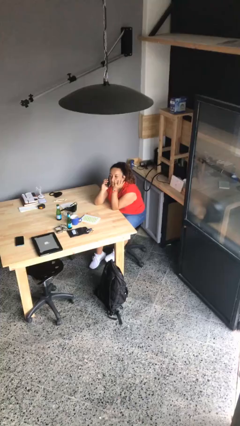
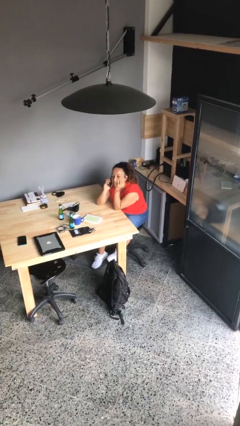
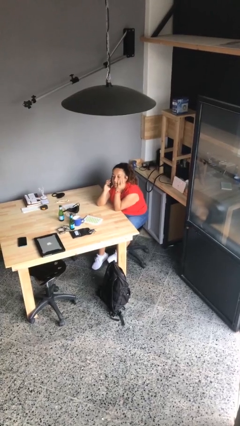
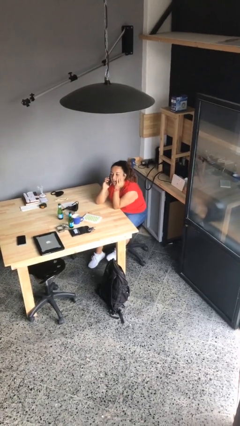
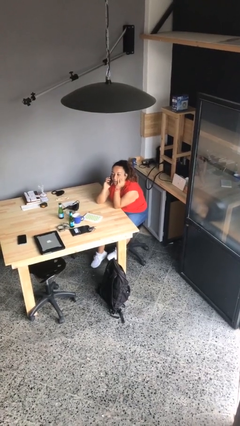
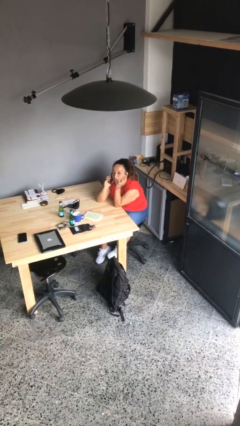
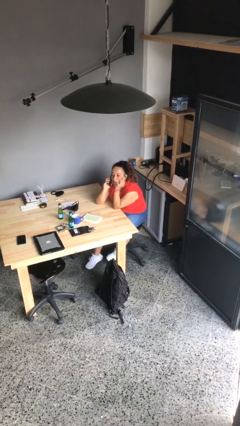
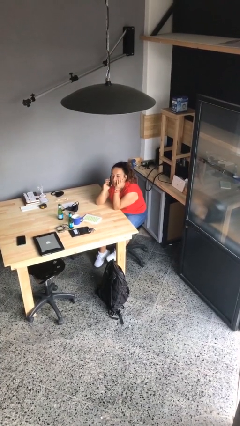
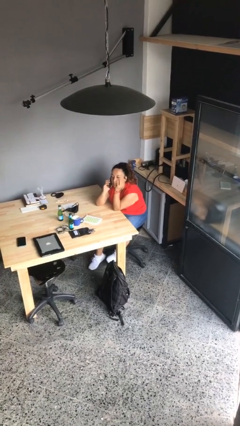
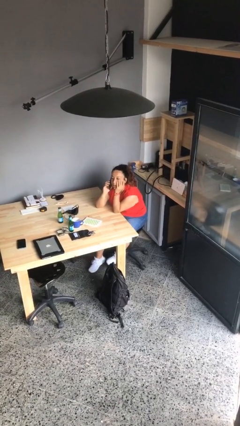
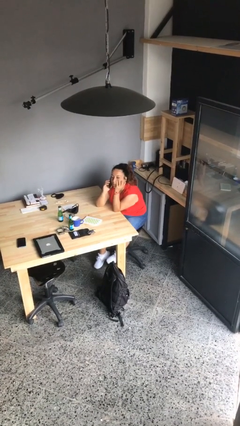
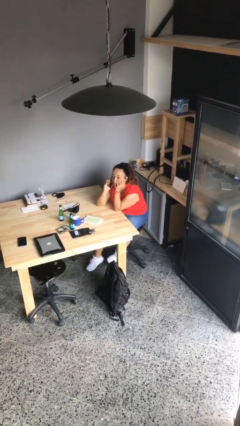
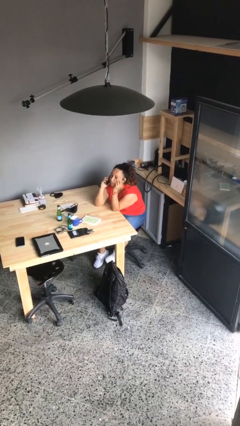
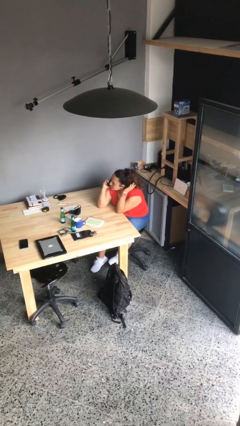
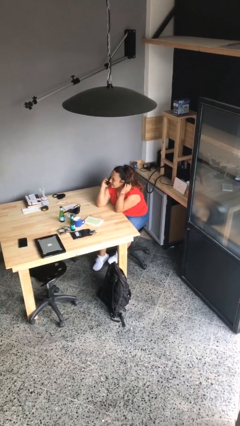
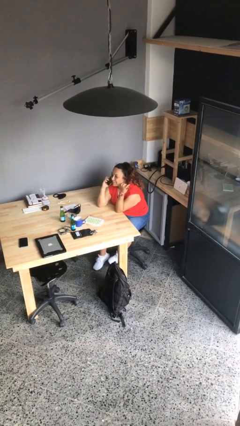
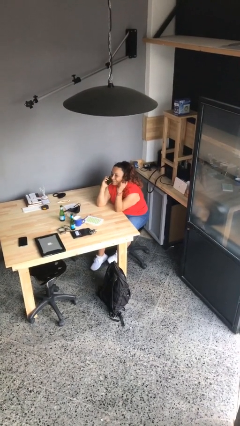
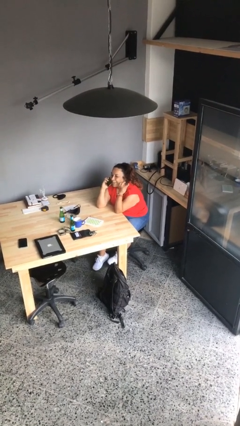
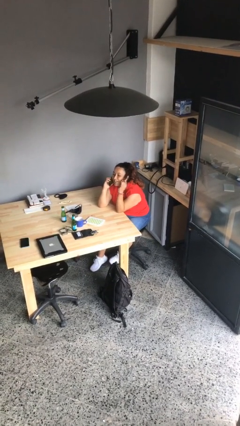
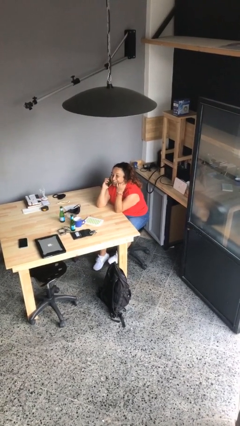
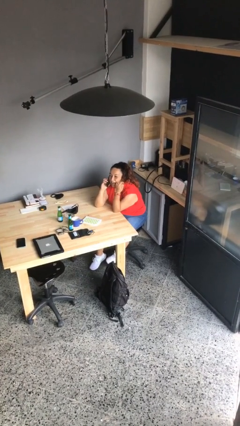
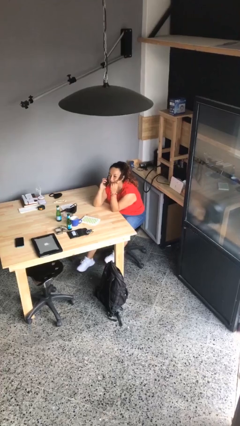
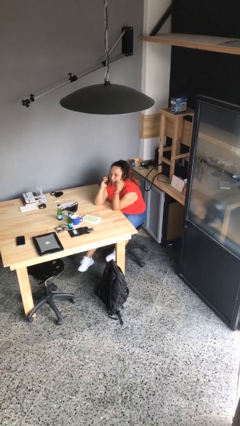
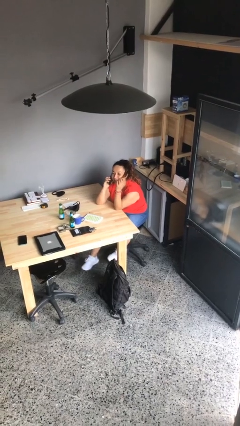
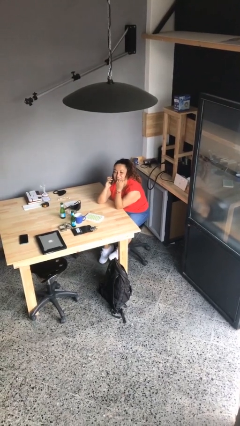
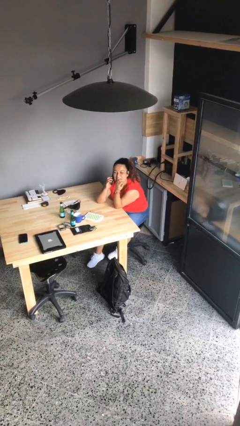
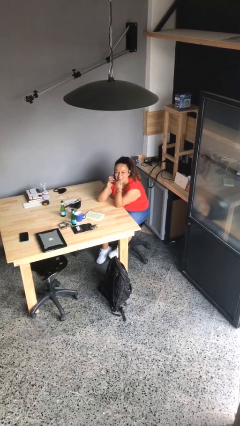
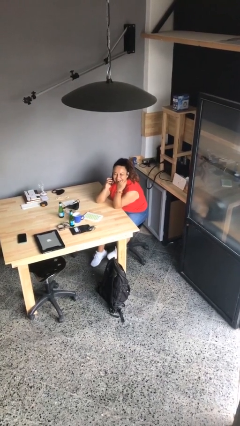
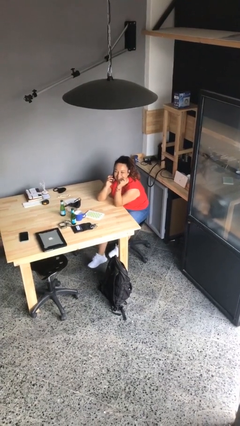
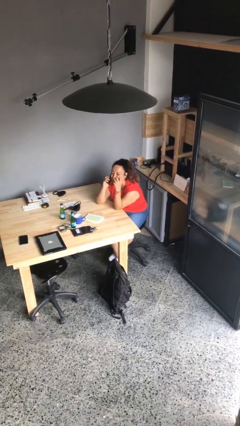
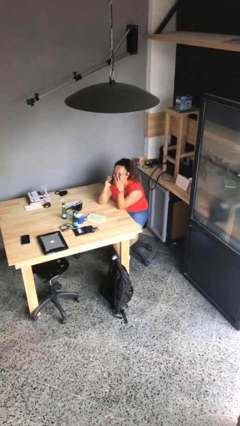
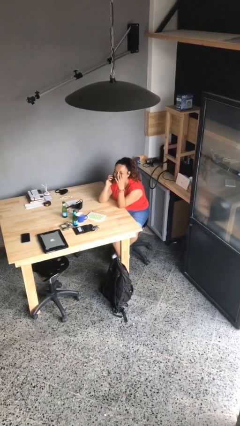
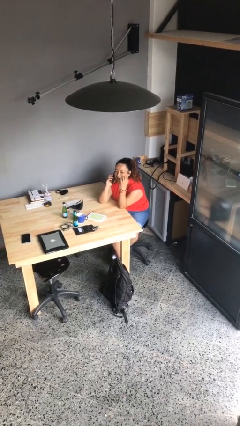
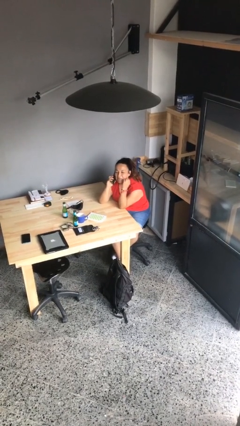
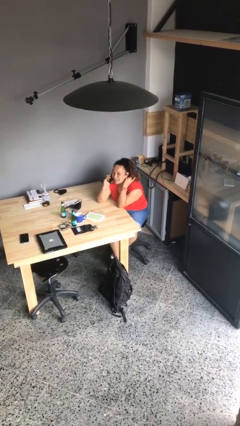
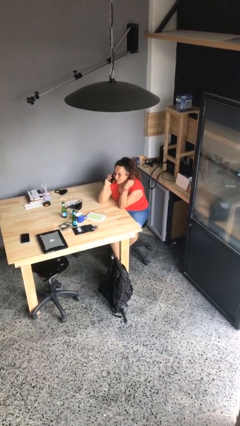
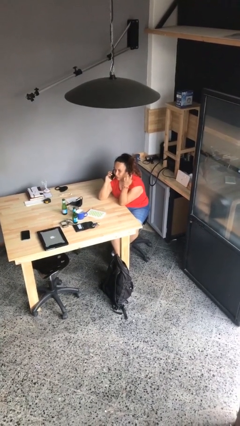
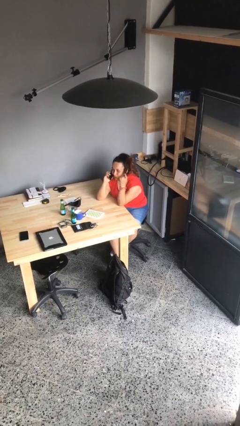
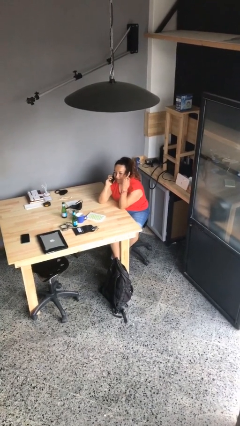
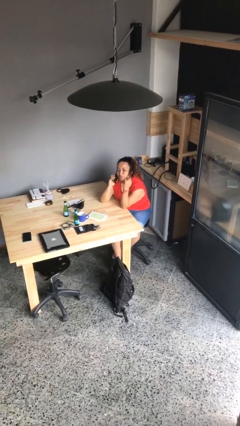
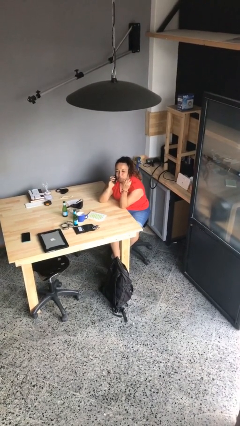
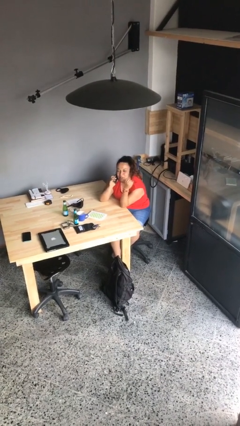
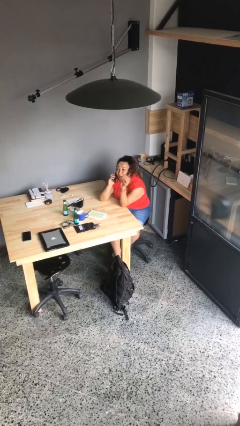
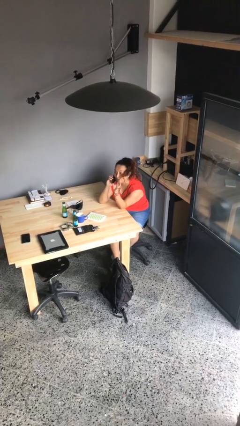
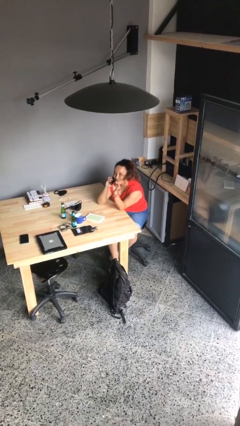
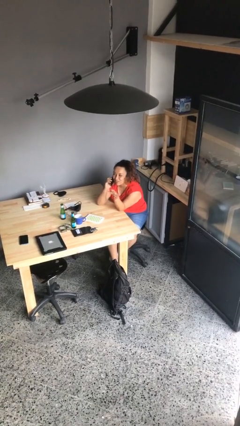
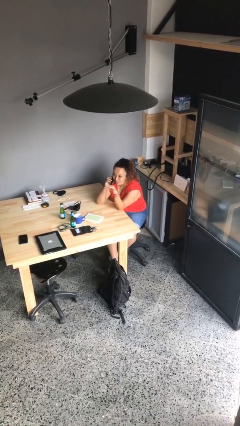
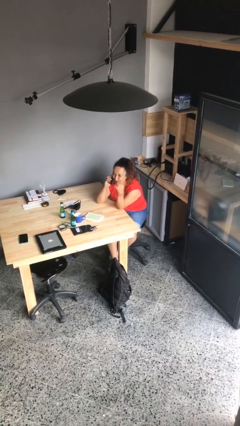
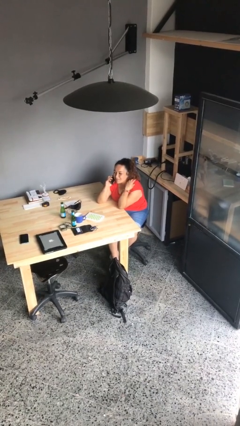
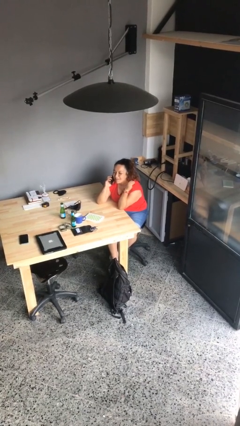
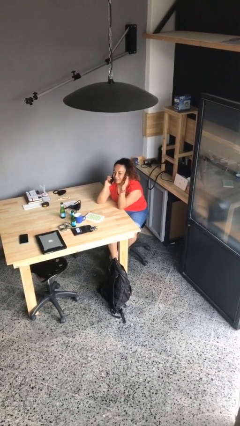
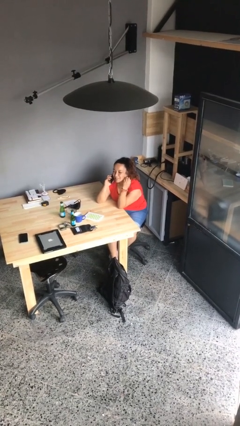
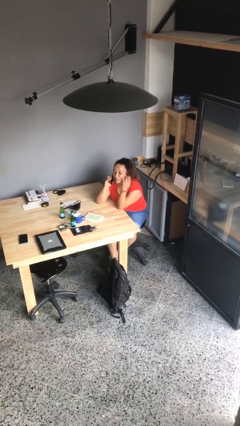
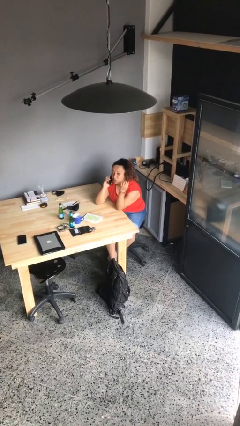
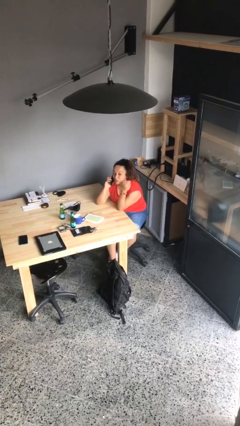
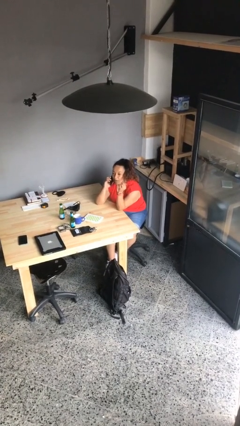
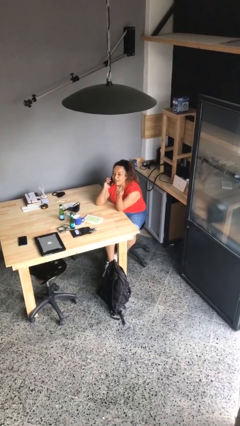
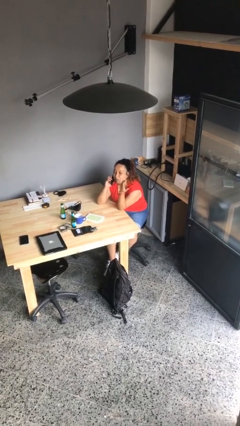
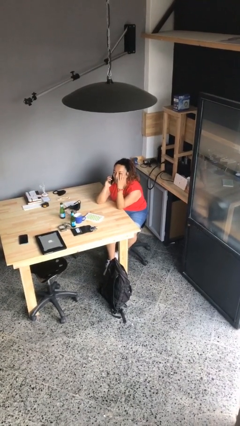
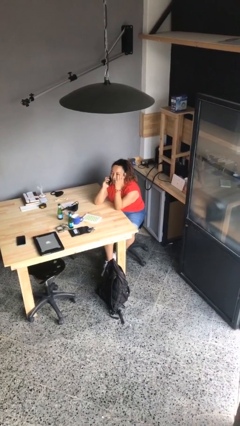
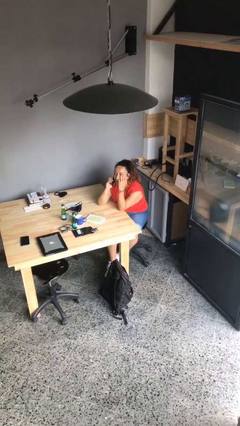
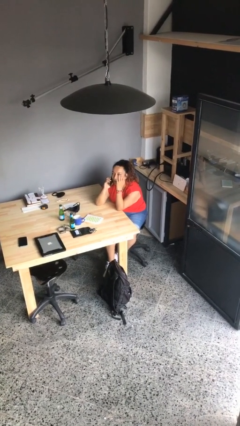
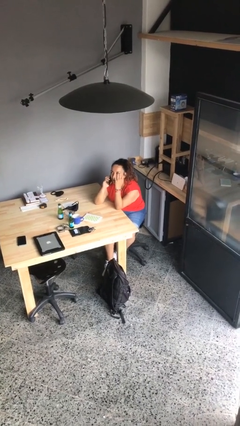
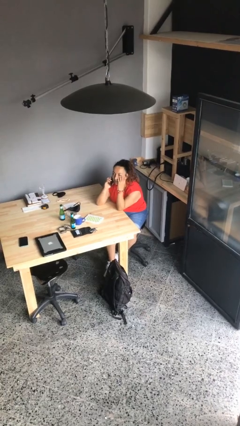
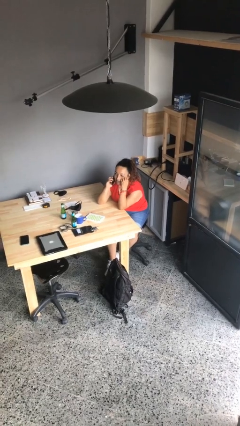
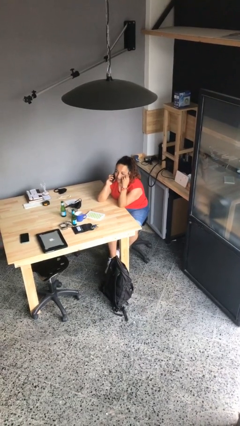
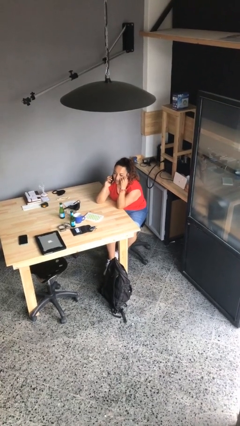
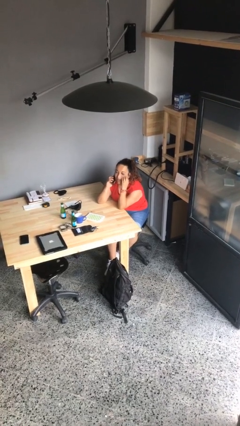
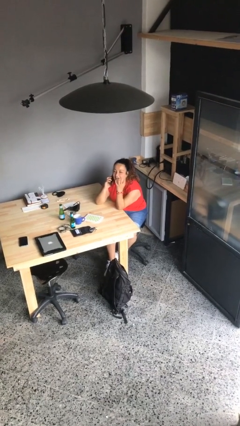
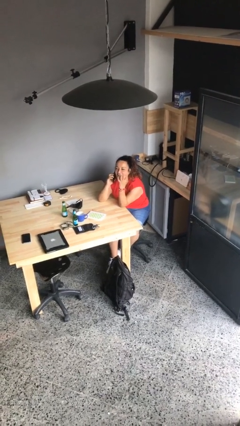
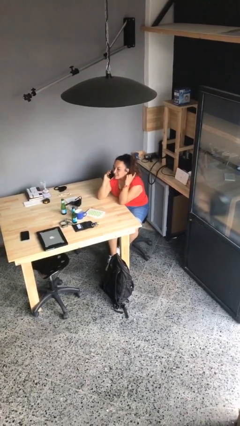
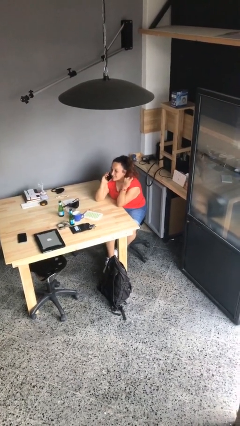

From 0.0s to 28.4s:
person talks on phone

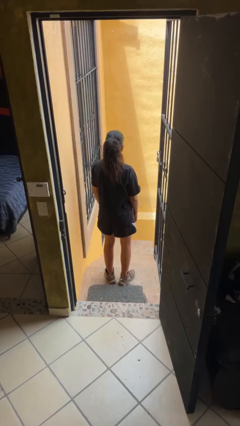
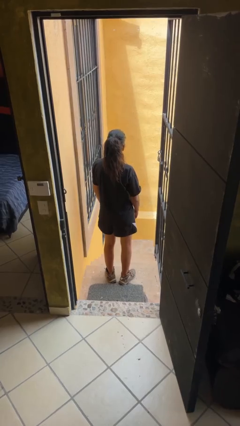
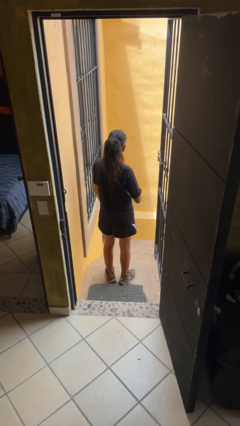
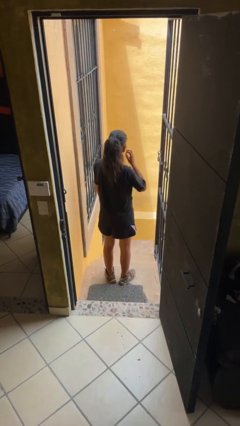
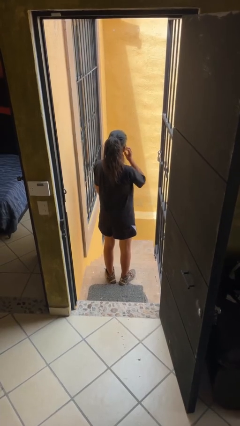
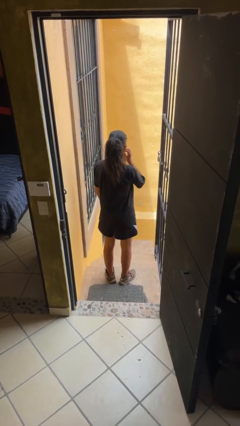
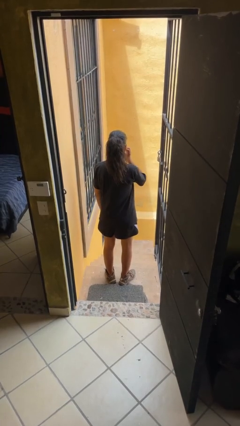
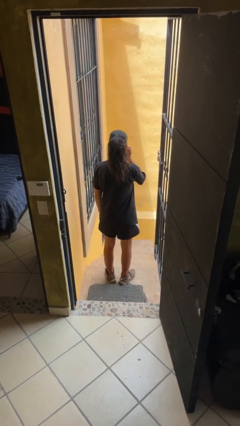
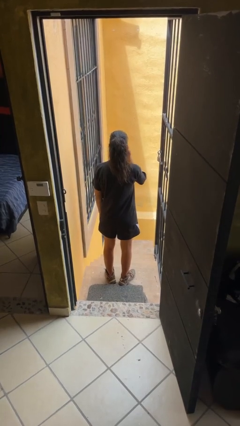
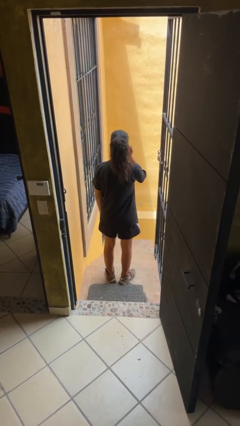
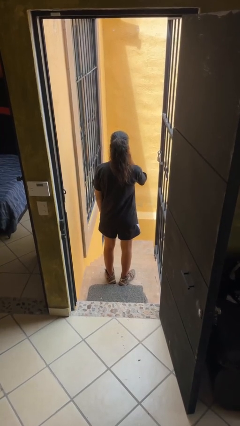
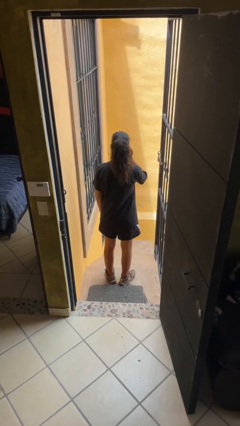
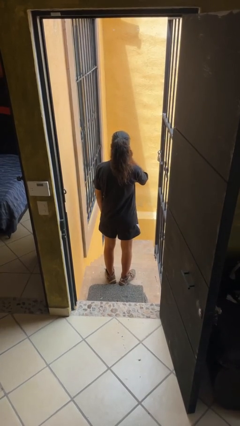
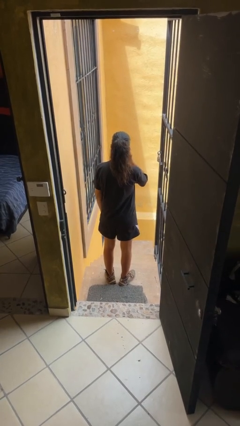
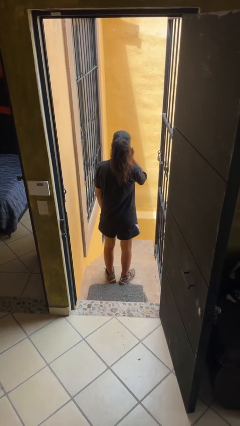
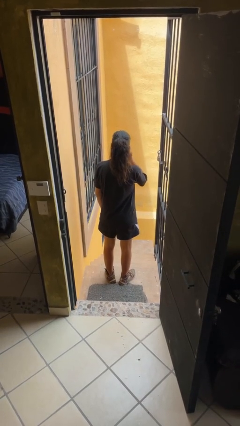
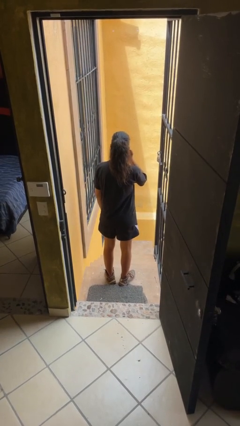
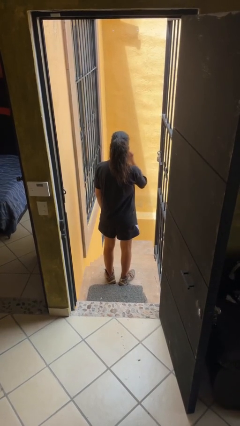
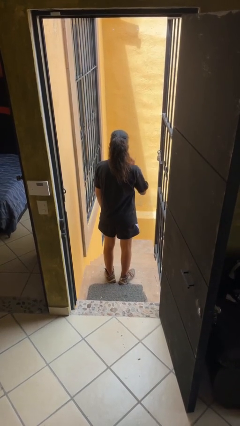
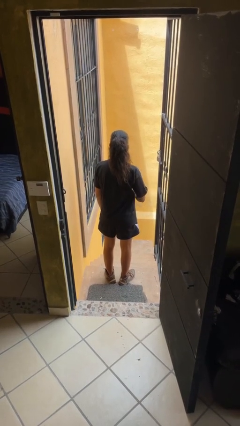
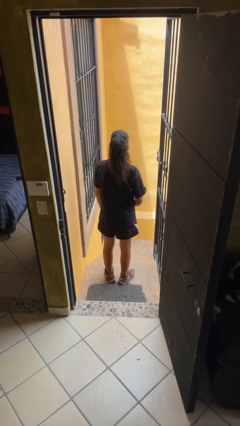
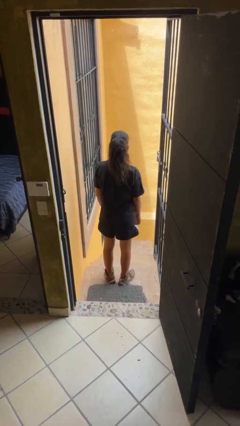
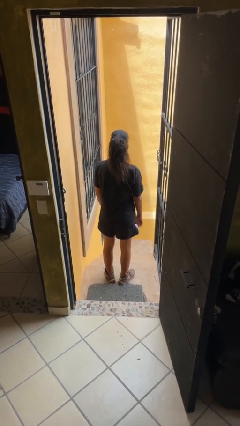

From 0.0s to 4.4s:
person scratches face
